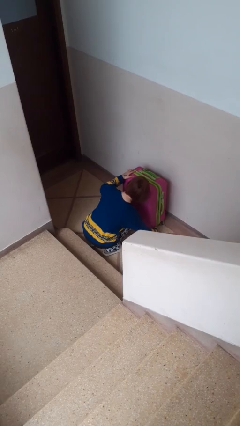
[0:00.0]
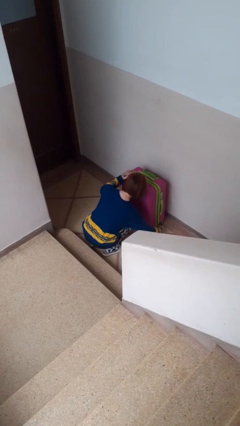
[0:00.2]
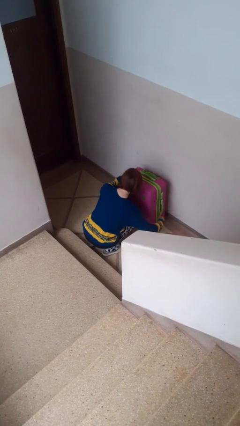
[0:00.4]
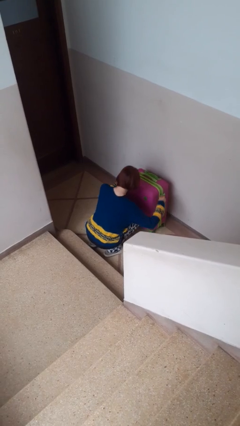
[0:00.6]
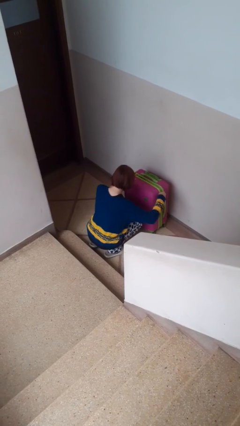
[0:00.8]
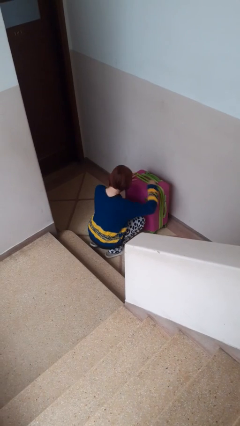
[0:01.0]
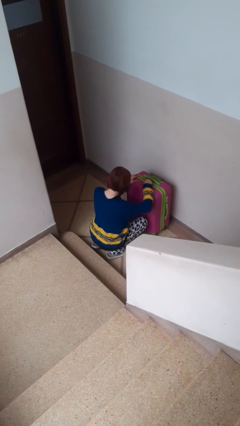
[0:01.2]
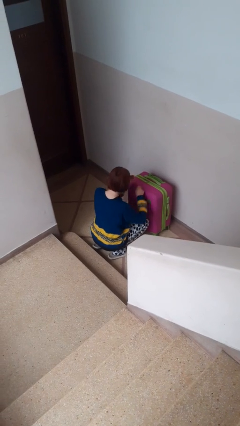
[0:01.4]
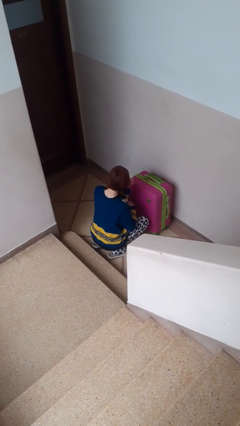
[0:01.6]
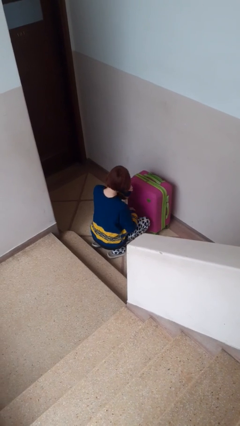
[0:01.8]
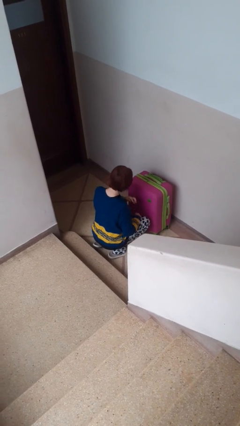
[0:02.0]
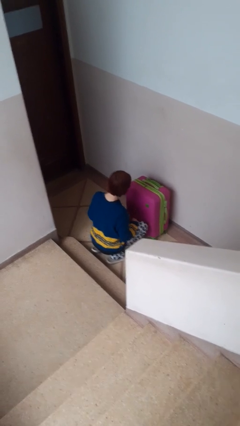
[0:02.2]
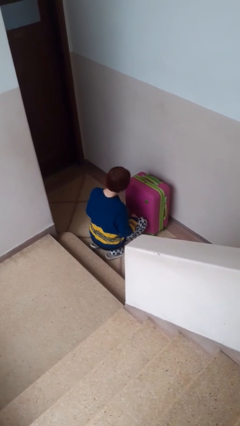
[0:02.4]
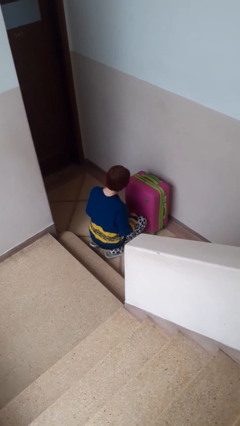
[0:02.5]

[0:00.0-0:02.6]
person closes suitcase

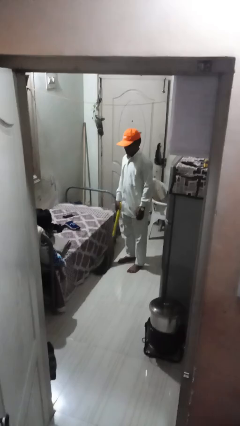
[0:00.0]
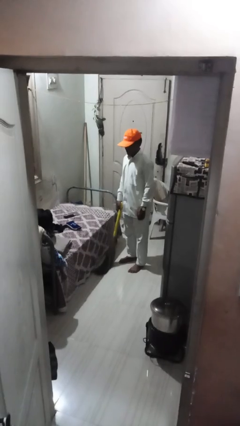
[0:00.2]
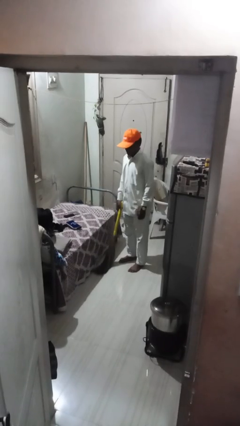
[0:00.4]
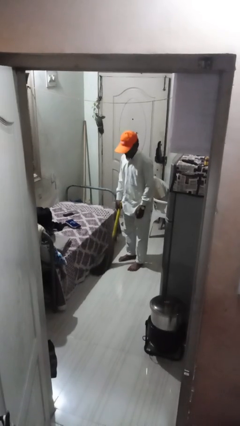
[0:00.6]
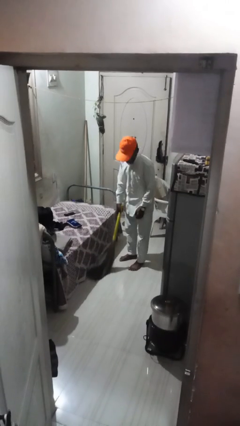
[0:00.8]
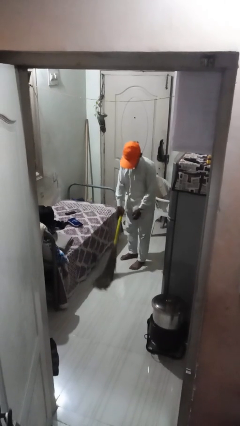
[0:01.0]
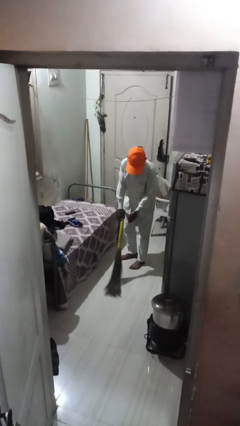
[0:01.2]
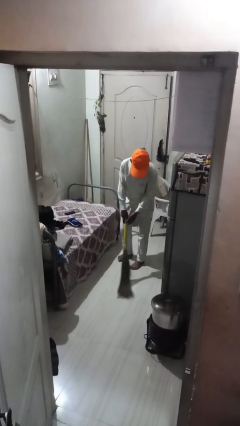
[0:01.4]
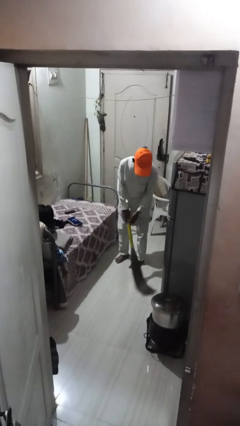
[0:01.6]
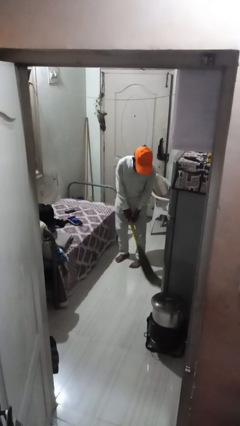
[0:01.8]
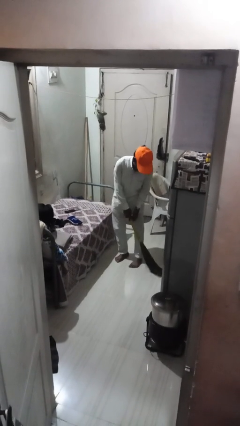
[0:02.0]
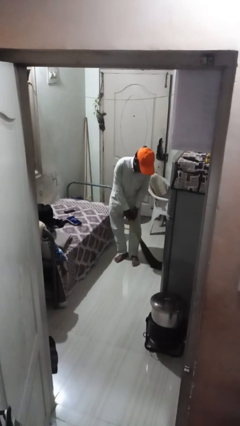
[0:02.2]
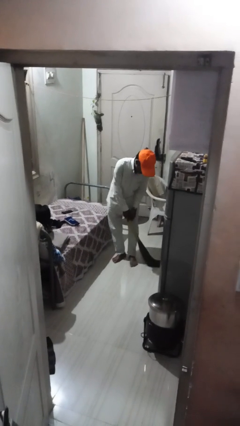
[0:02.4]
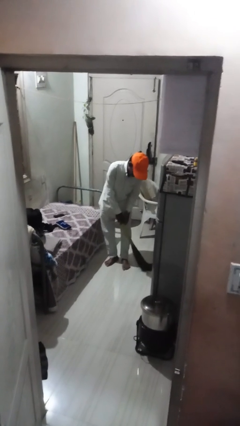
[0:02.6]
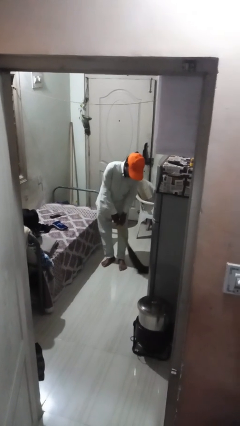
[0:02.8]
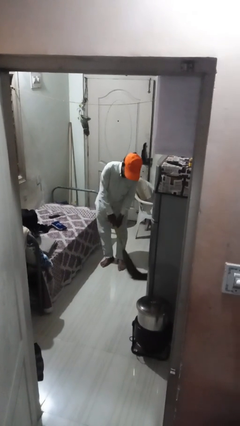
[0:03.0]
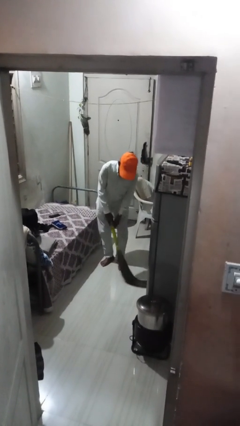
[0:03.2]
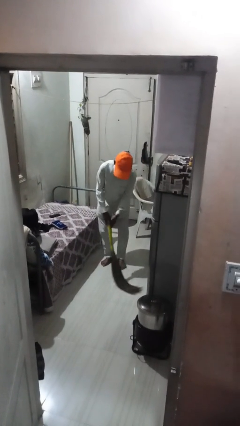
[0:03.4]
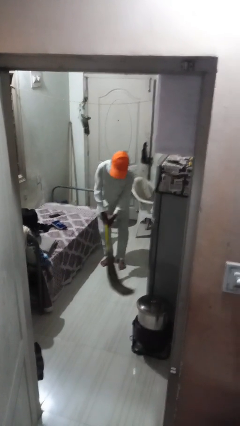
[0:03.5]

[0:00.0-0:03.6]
person sweeps floor

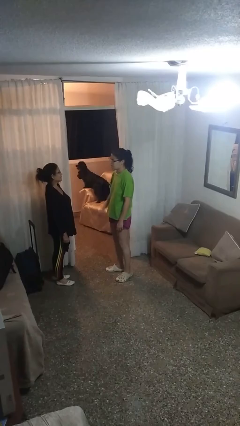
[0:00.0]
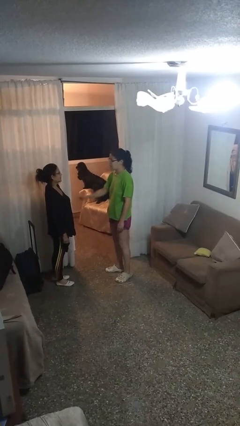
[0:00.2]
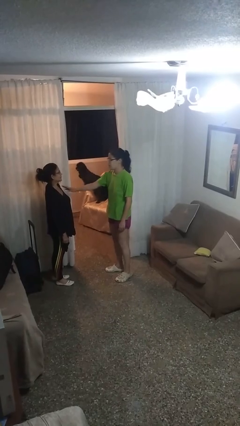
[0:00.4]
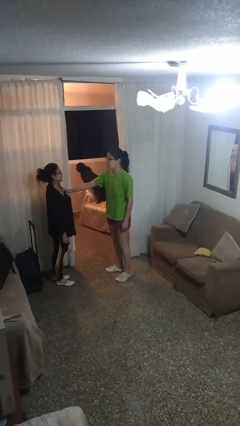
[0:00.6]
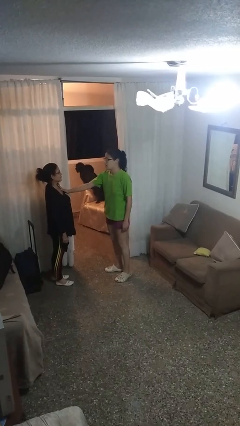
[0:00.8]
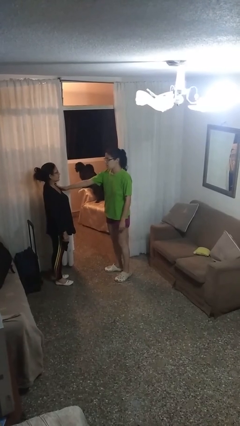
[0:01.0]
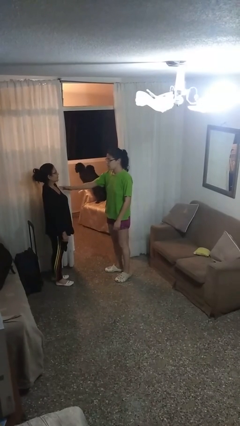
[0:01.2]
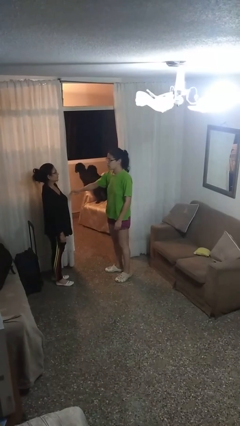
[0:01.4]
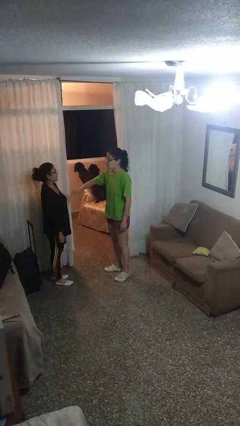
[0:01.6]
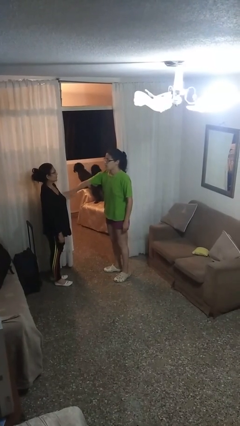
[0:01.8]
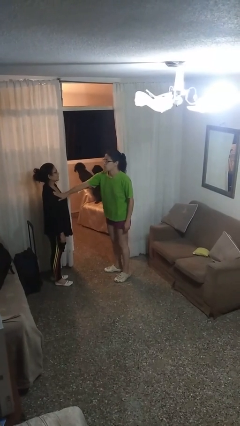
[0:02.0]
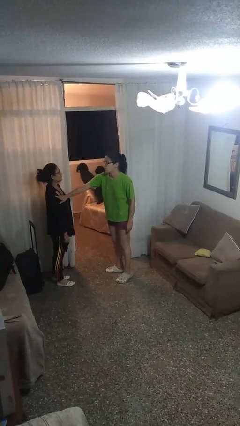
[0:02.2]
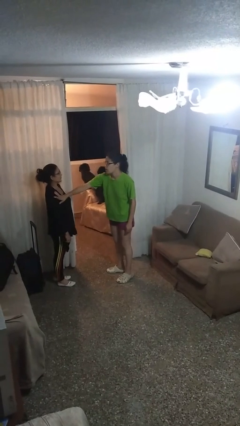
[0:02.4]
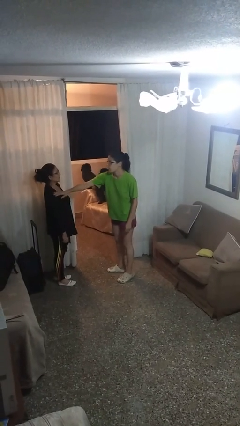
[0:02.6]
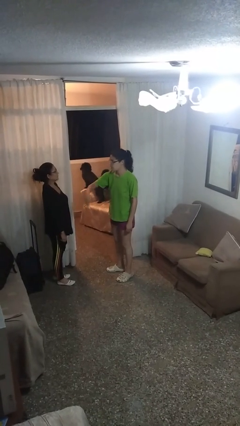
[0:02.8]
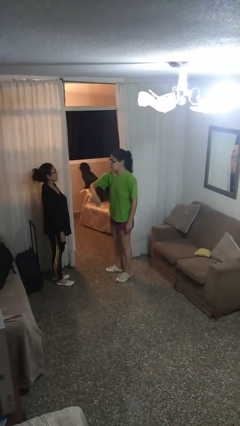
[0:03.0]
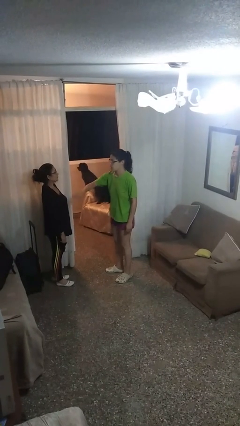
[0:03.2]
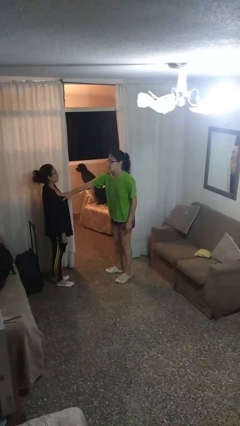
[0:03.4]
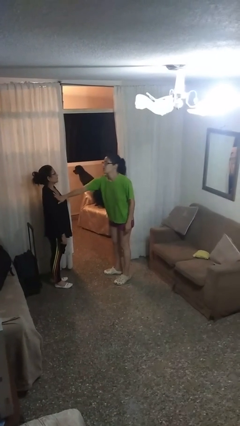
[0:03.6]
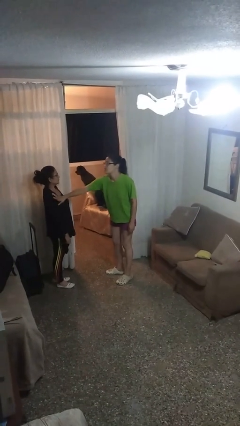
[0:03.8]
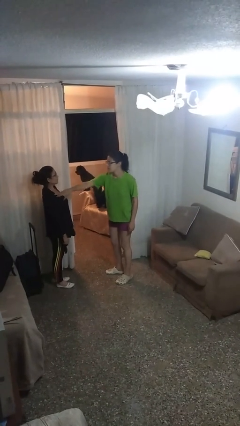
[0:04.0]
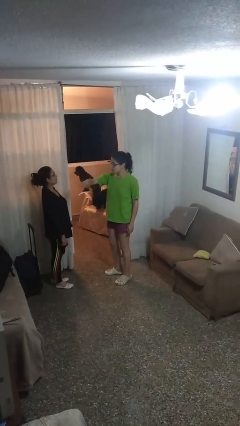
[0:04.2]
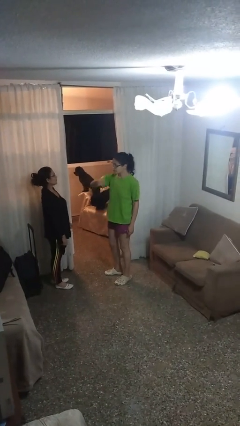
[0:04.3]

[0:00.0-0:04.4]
person shoves person

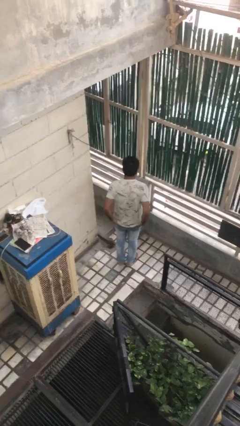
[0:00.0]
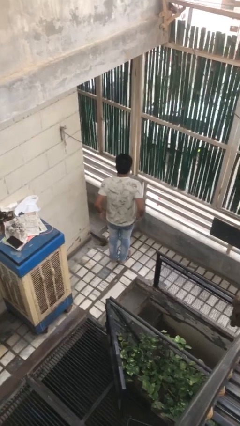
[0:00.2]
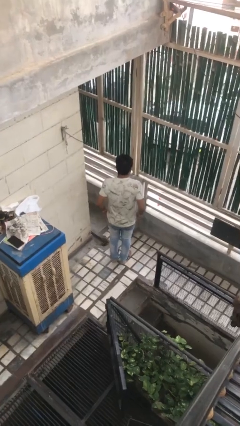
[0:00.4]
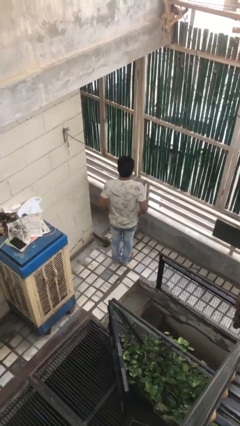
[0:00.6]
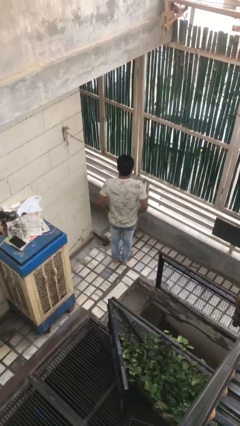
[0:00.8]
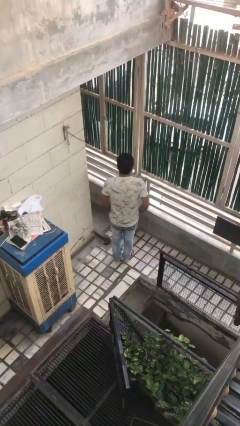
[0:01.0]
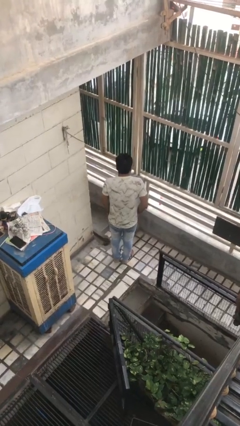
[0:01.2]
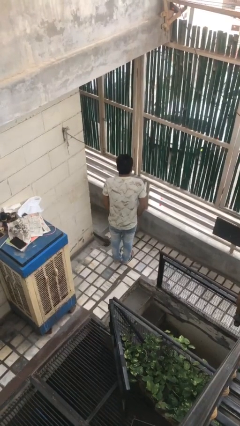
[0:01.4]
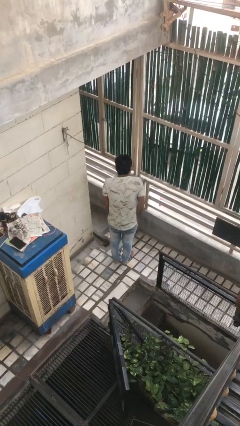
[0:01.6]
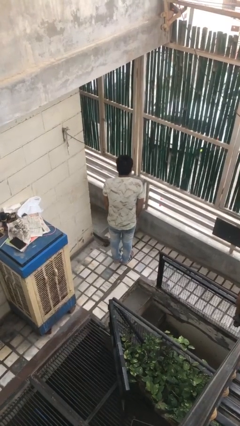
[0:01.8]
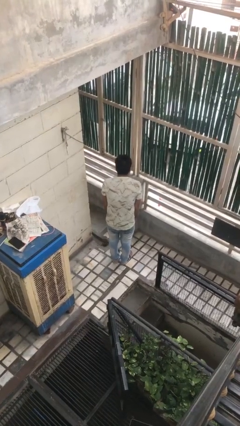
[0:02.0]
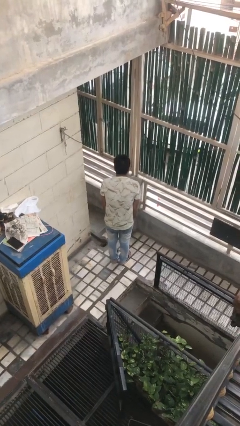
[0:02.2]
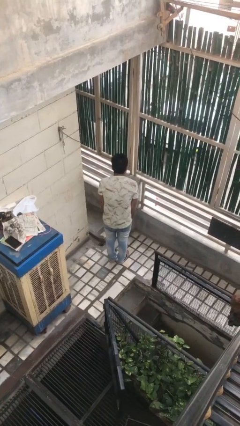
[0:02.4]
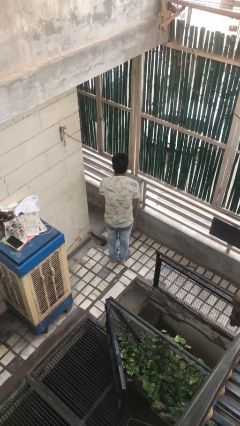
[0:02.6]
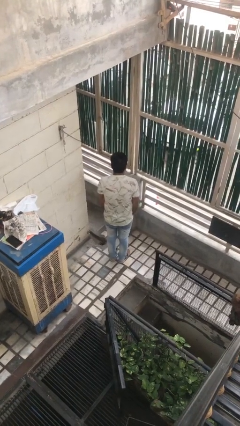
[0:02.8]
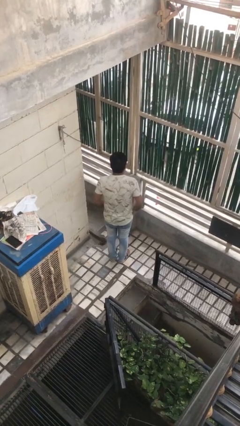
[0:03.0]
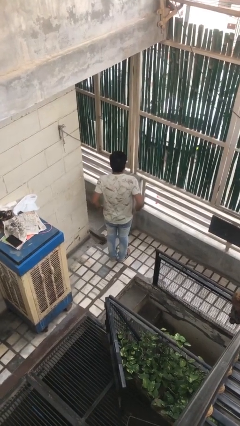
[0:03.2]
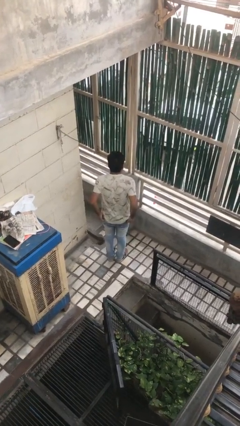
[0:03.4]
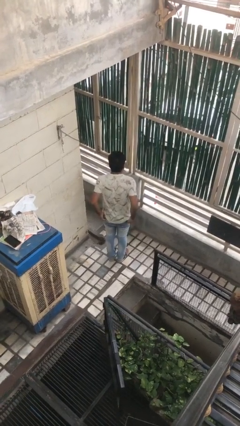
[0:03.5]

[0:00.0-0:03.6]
person puts hands in back pockets

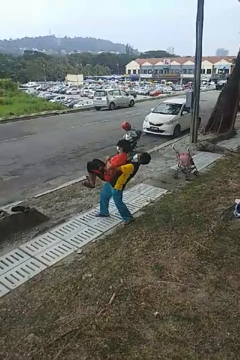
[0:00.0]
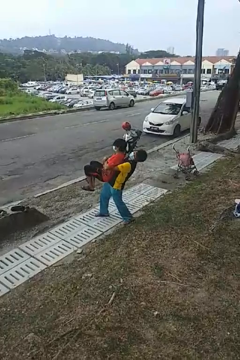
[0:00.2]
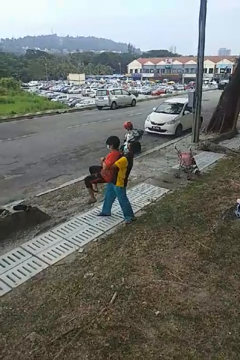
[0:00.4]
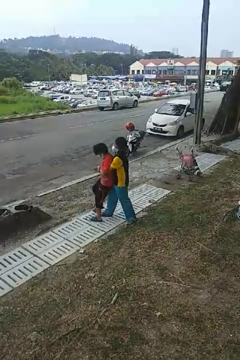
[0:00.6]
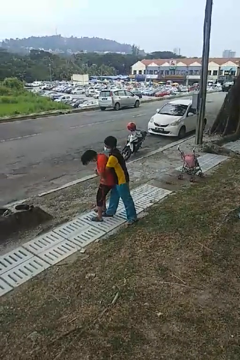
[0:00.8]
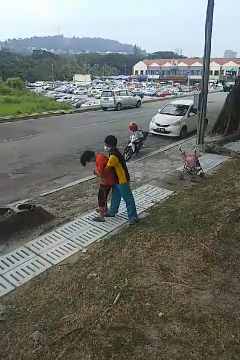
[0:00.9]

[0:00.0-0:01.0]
person puts down person

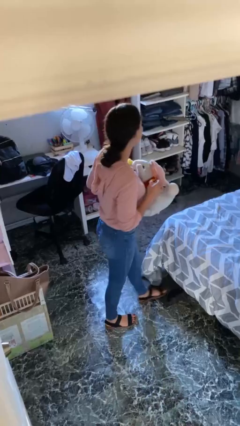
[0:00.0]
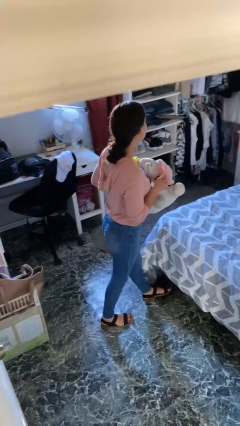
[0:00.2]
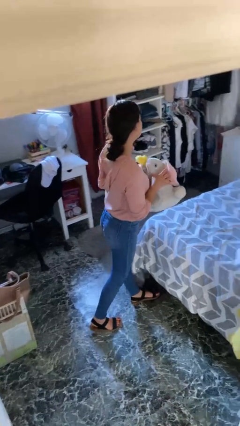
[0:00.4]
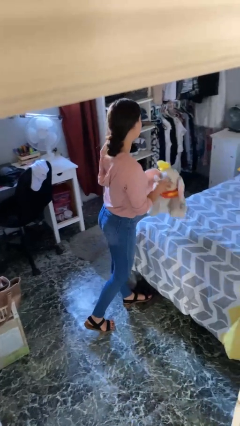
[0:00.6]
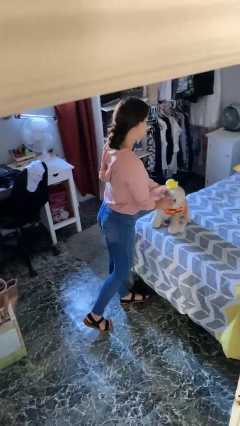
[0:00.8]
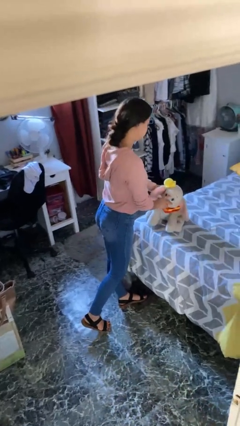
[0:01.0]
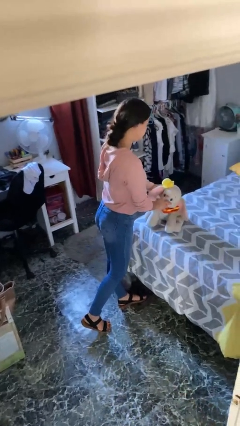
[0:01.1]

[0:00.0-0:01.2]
person puts down object on bed

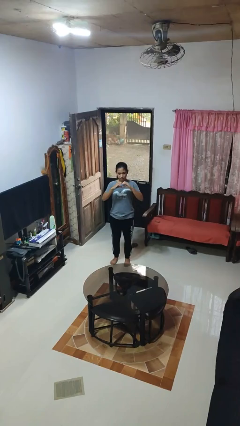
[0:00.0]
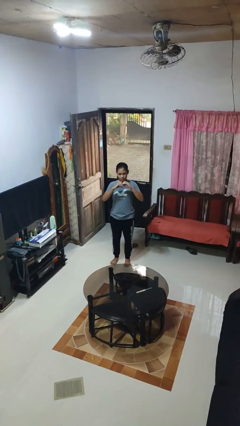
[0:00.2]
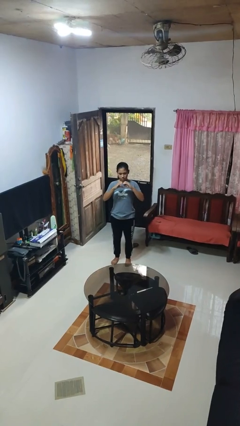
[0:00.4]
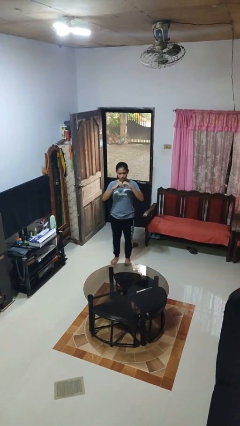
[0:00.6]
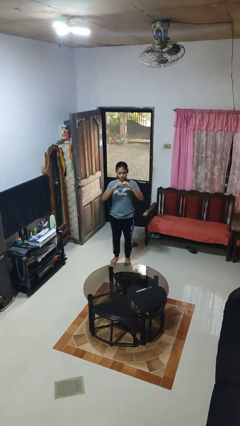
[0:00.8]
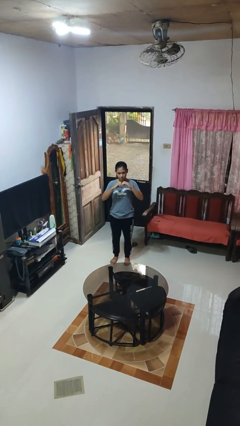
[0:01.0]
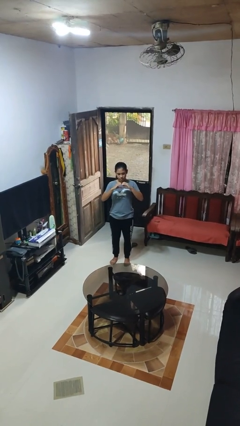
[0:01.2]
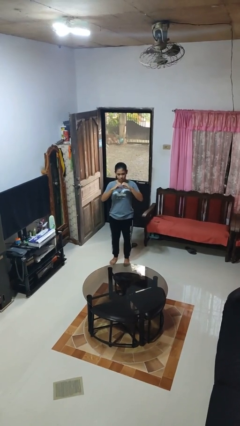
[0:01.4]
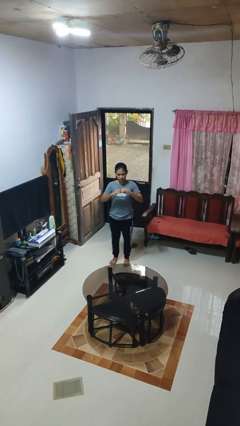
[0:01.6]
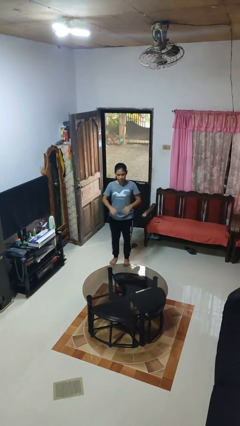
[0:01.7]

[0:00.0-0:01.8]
person gestures heart
